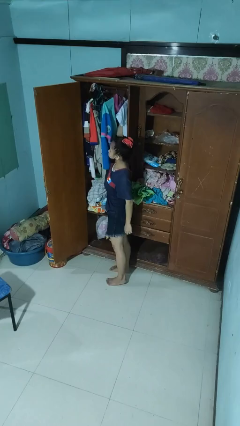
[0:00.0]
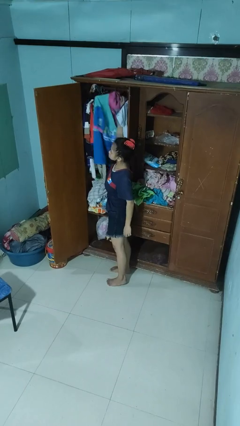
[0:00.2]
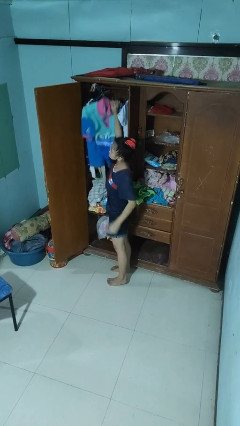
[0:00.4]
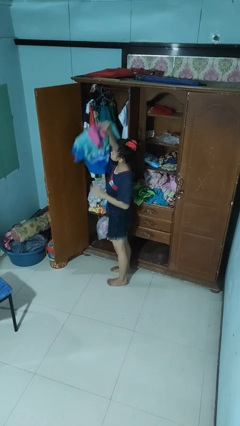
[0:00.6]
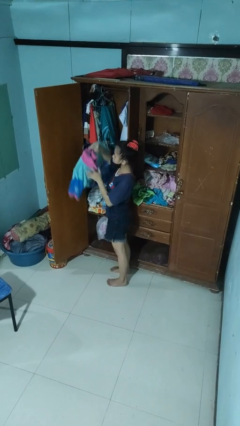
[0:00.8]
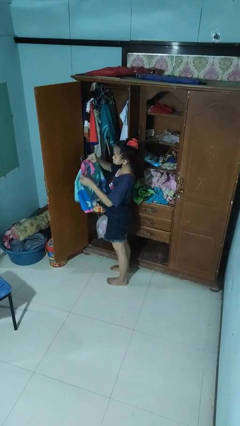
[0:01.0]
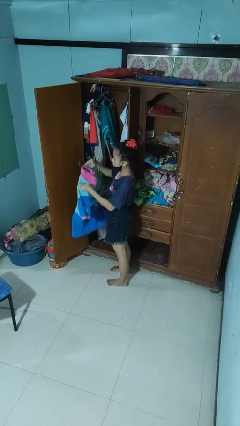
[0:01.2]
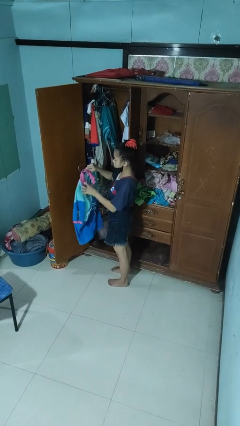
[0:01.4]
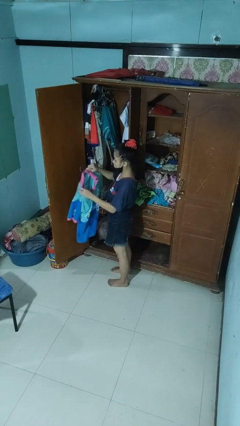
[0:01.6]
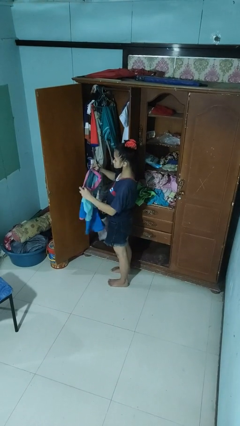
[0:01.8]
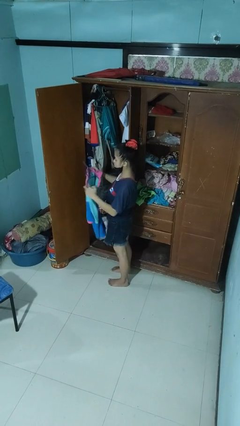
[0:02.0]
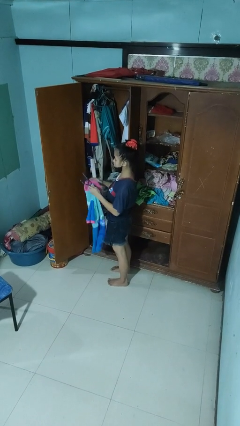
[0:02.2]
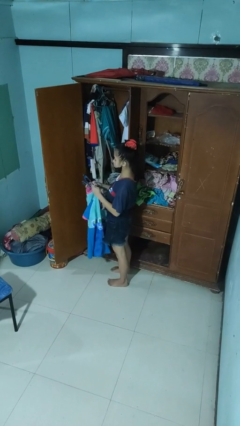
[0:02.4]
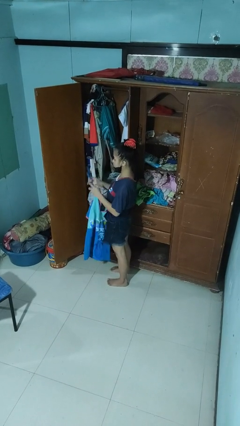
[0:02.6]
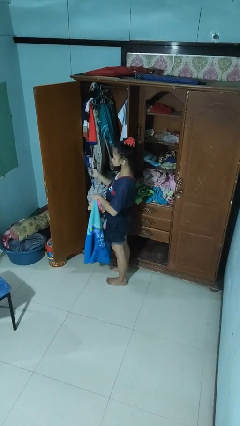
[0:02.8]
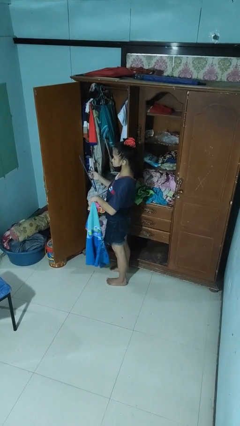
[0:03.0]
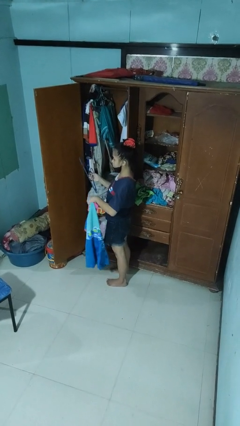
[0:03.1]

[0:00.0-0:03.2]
person takes clothes from closet

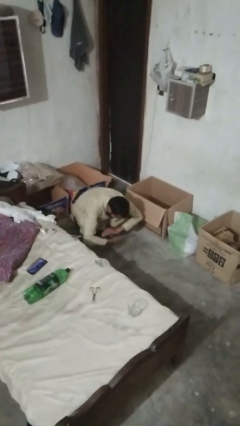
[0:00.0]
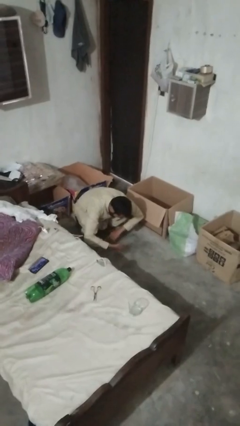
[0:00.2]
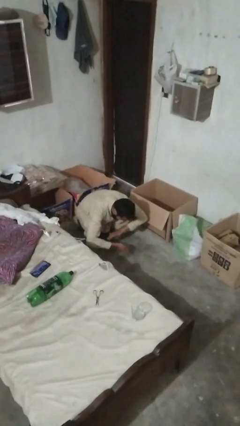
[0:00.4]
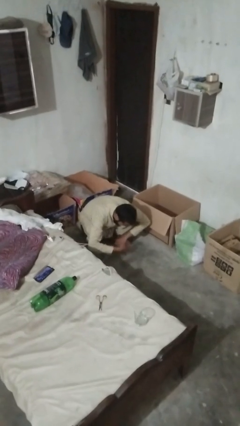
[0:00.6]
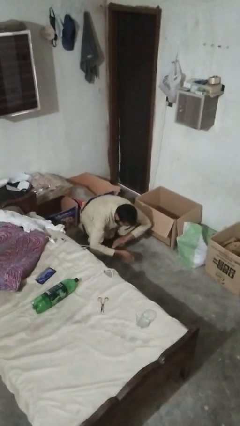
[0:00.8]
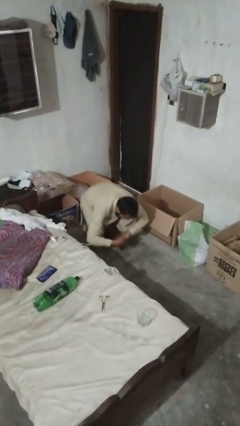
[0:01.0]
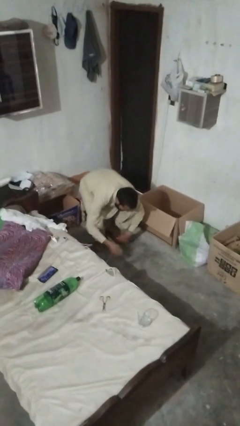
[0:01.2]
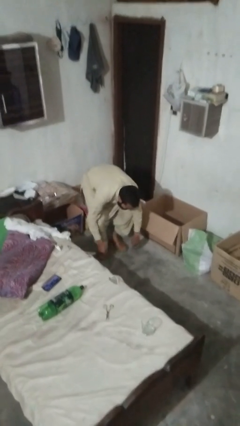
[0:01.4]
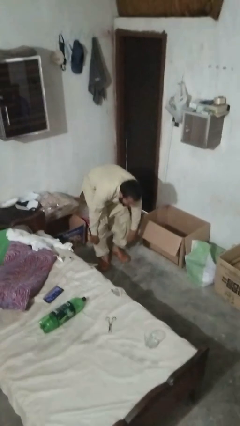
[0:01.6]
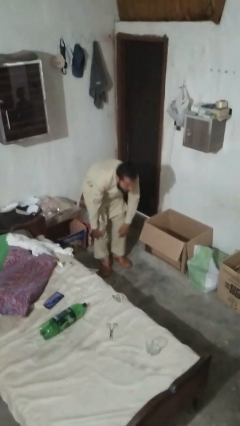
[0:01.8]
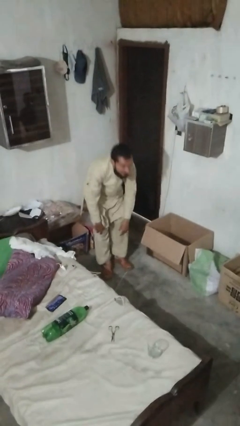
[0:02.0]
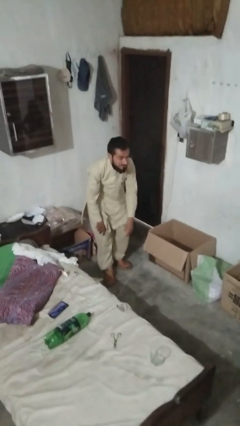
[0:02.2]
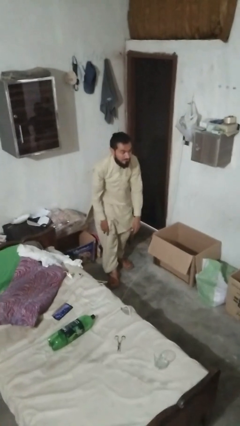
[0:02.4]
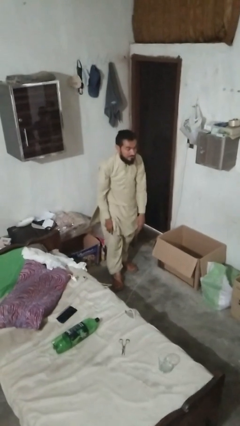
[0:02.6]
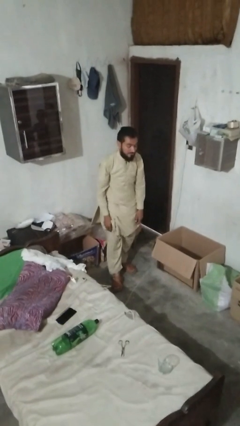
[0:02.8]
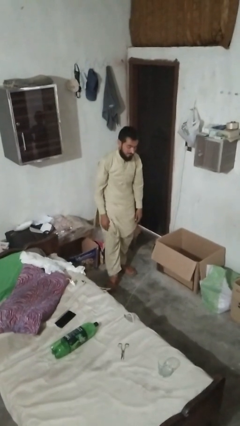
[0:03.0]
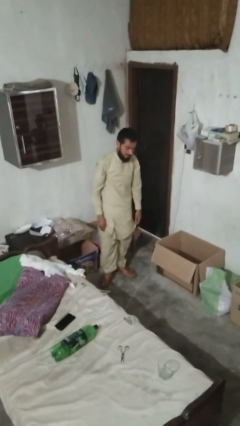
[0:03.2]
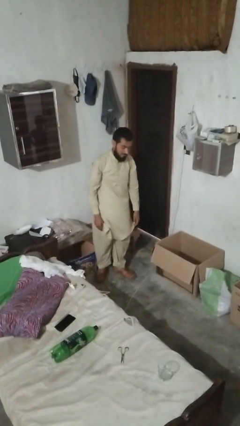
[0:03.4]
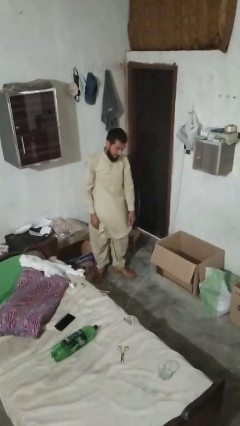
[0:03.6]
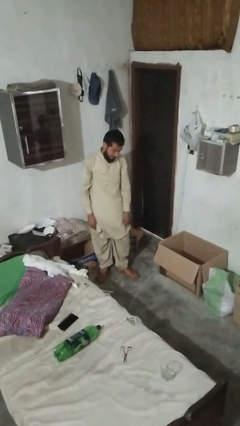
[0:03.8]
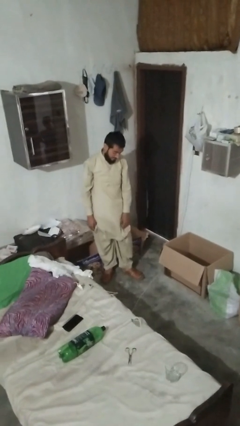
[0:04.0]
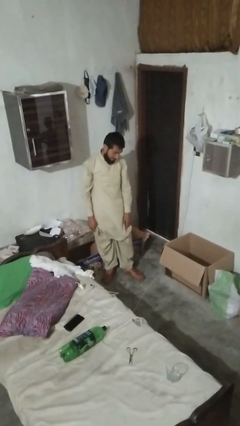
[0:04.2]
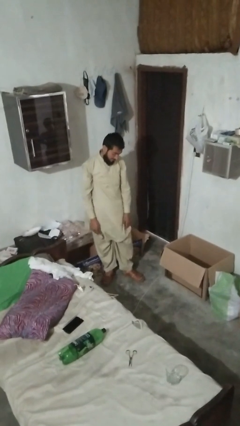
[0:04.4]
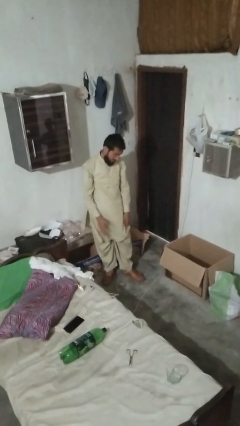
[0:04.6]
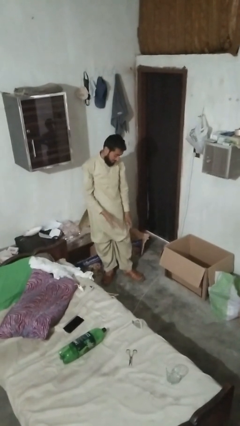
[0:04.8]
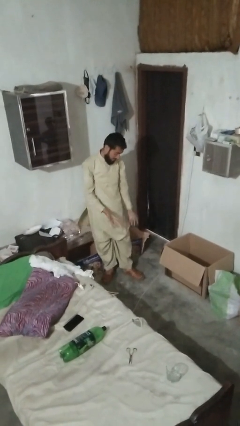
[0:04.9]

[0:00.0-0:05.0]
person stands up from floor

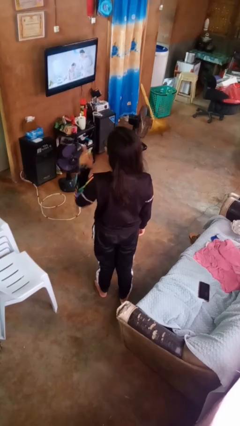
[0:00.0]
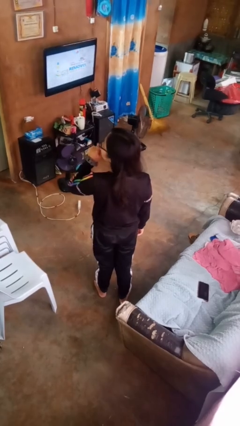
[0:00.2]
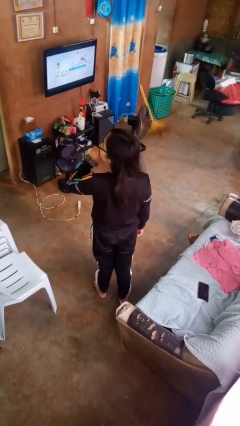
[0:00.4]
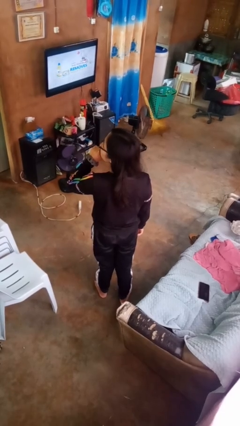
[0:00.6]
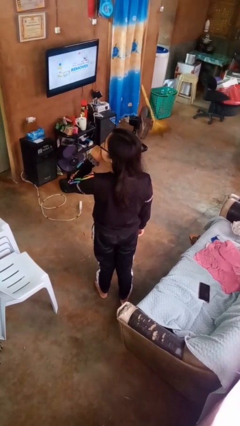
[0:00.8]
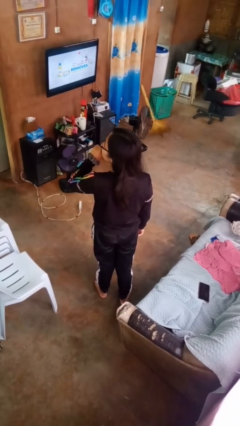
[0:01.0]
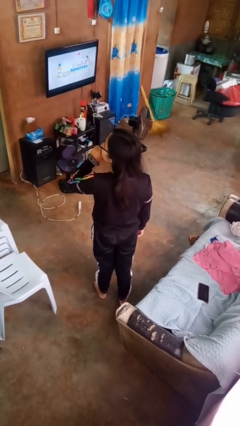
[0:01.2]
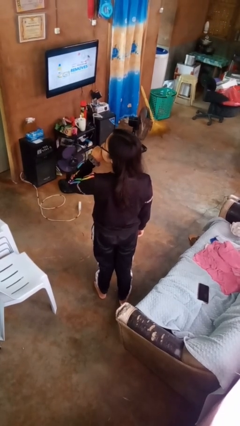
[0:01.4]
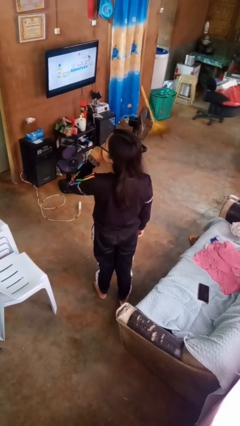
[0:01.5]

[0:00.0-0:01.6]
person gestures be quiet

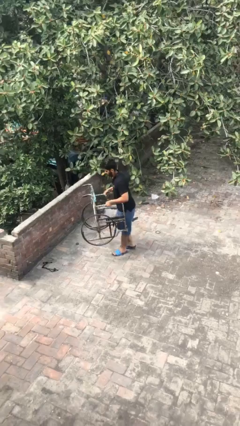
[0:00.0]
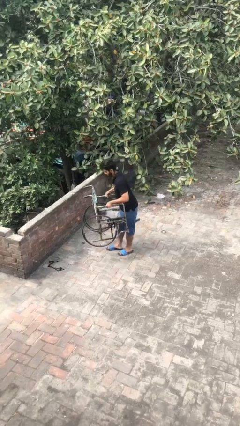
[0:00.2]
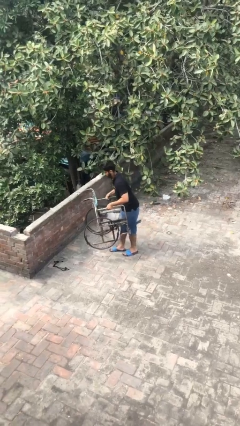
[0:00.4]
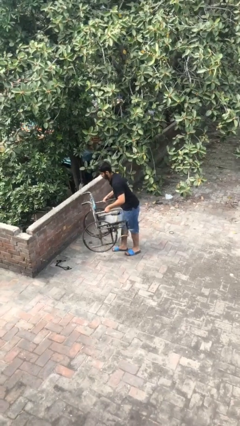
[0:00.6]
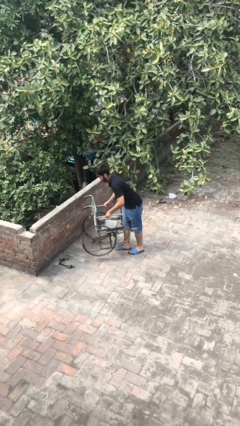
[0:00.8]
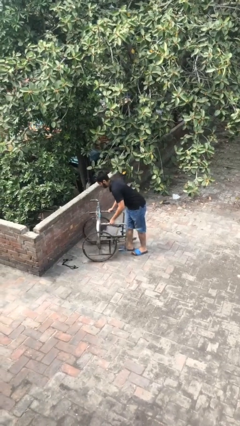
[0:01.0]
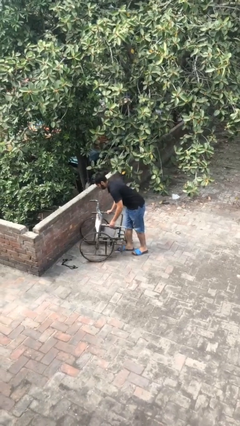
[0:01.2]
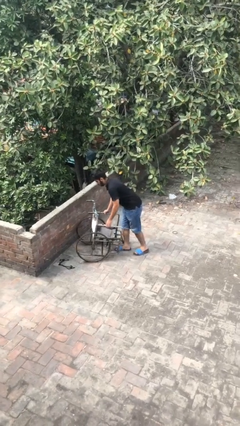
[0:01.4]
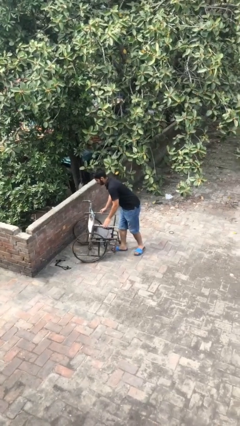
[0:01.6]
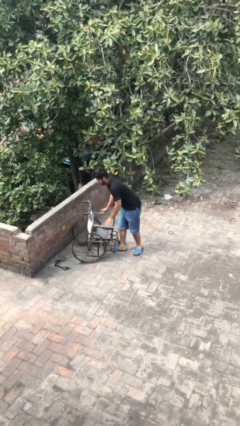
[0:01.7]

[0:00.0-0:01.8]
person puts down object on floor

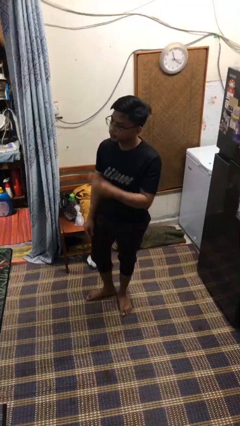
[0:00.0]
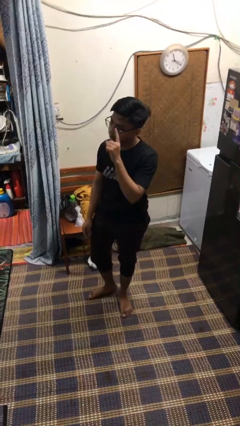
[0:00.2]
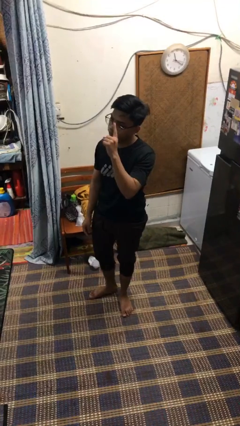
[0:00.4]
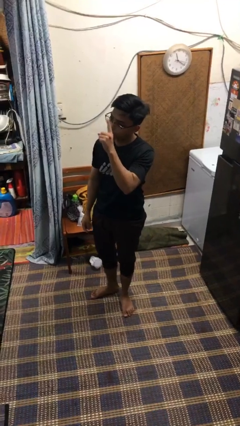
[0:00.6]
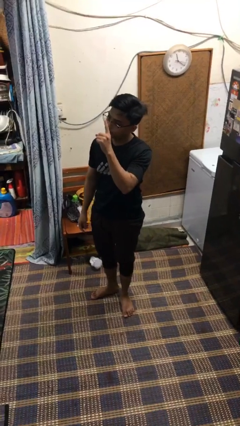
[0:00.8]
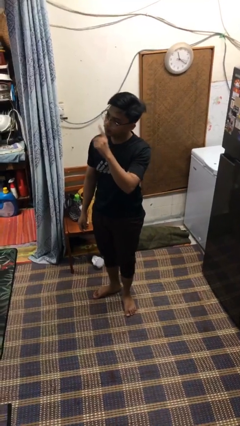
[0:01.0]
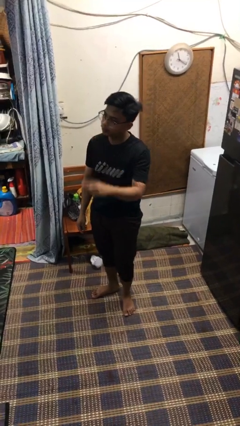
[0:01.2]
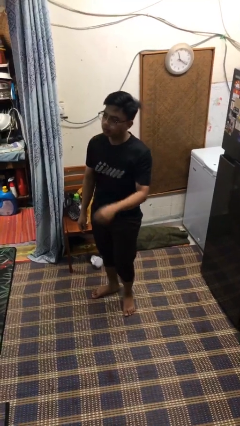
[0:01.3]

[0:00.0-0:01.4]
person gestures number one

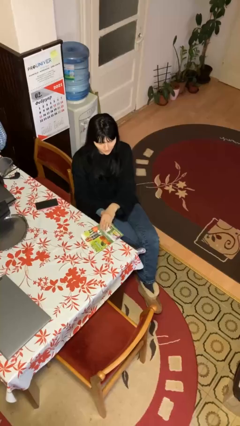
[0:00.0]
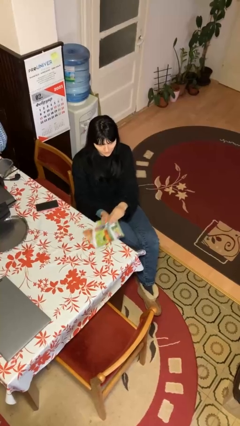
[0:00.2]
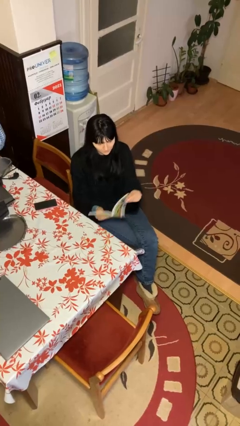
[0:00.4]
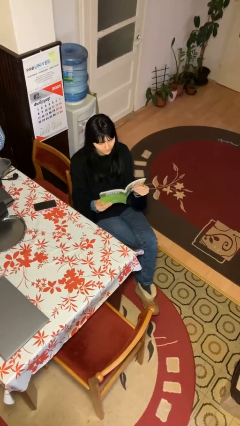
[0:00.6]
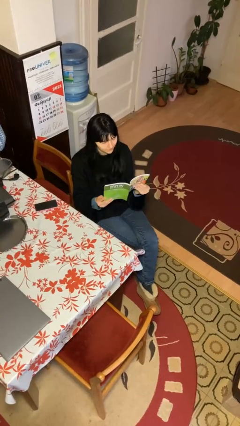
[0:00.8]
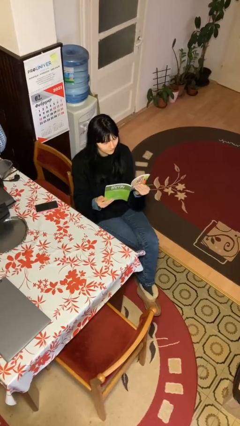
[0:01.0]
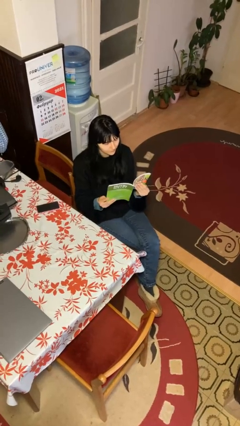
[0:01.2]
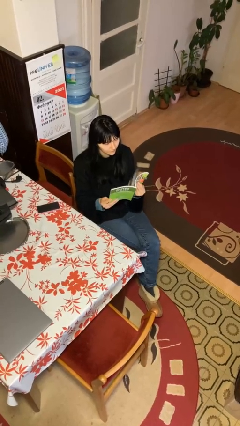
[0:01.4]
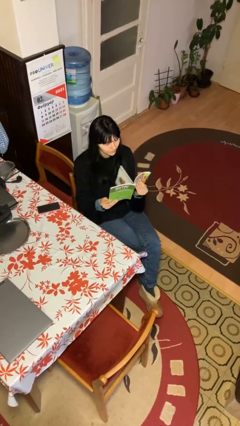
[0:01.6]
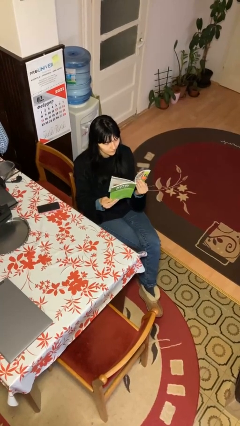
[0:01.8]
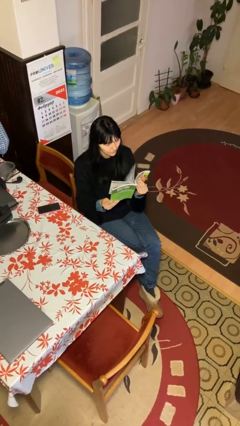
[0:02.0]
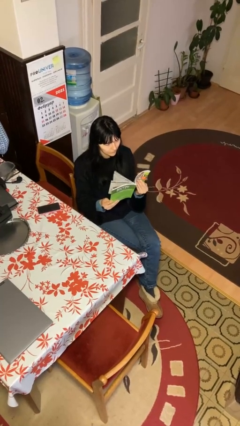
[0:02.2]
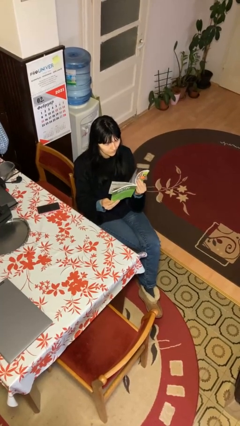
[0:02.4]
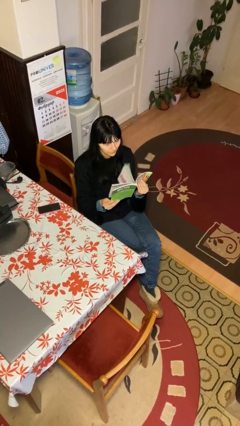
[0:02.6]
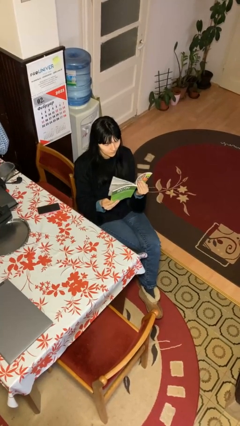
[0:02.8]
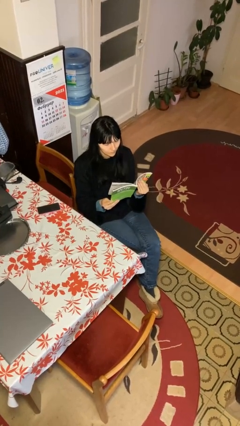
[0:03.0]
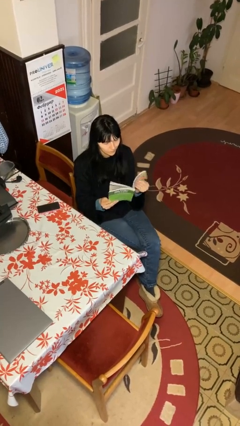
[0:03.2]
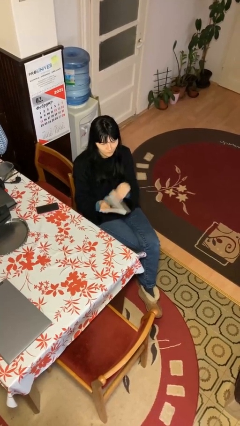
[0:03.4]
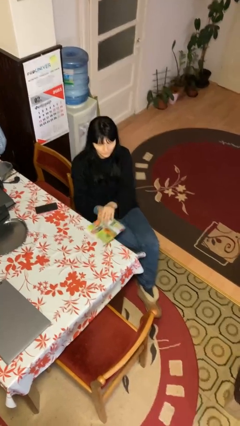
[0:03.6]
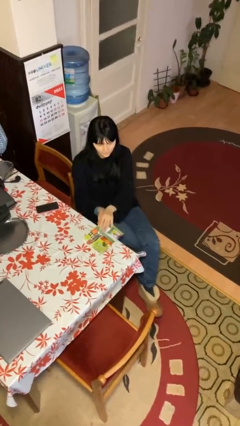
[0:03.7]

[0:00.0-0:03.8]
person reads document

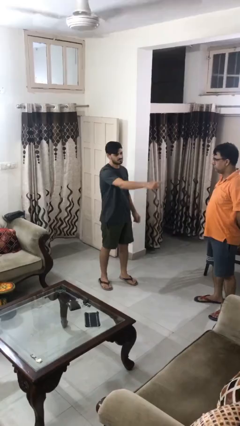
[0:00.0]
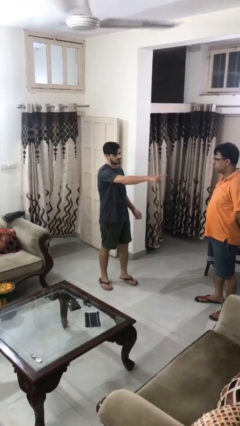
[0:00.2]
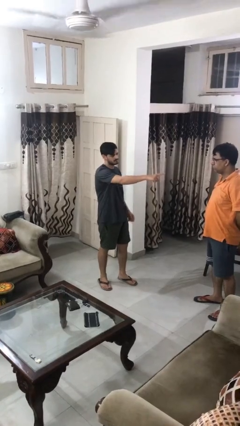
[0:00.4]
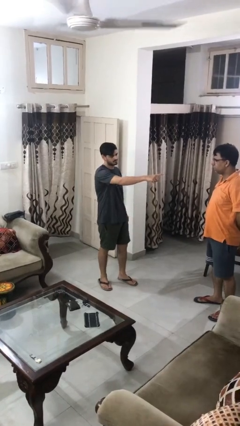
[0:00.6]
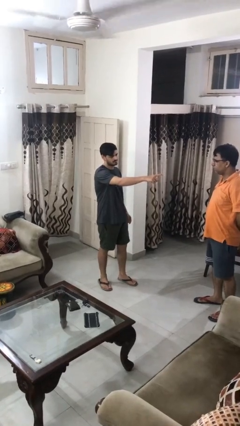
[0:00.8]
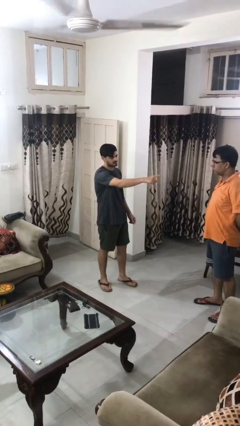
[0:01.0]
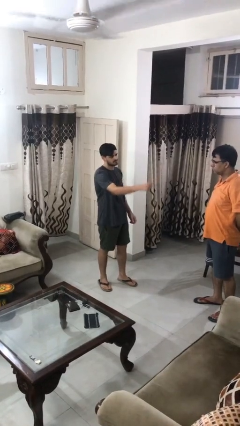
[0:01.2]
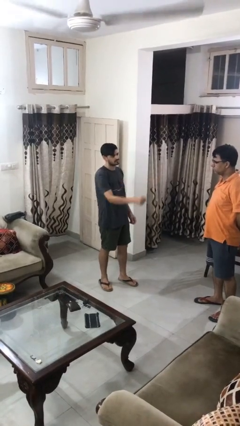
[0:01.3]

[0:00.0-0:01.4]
person points at person
